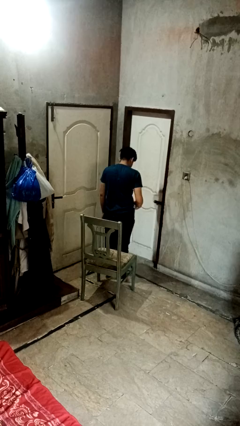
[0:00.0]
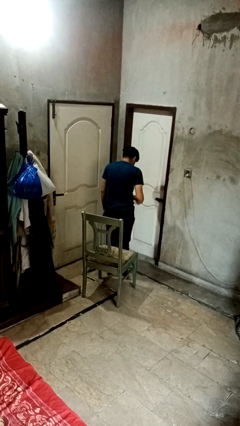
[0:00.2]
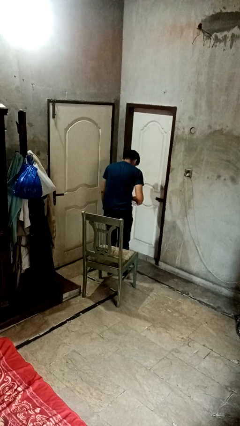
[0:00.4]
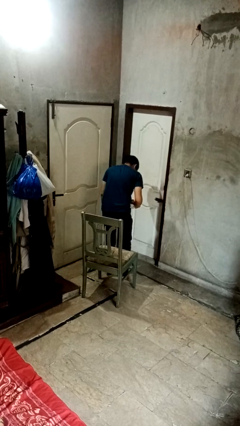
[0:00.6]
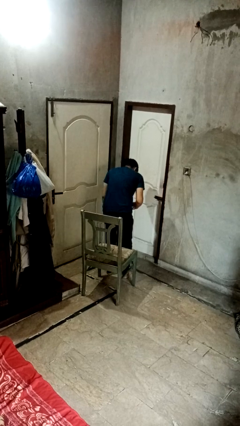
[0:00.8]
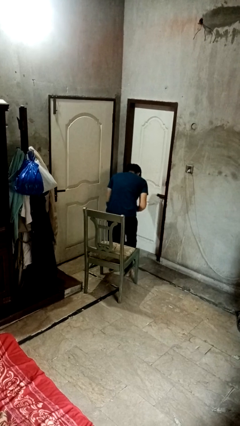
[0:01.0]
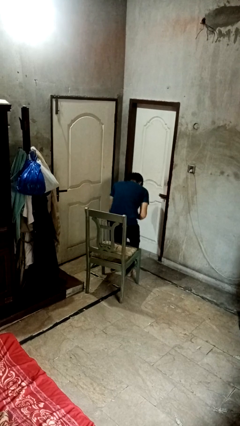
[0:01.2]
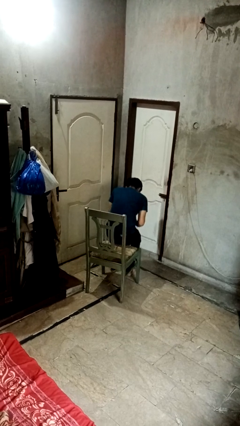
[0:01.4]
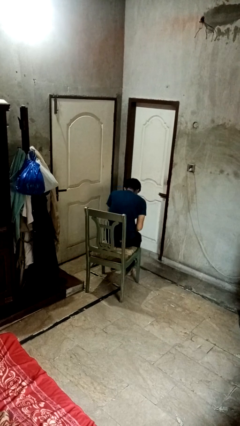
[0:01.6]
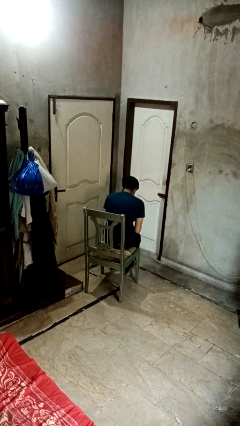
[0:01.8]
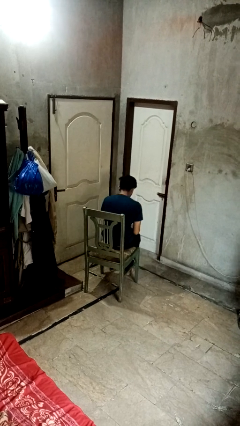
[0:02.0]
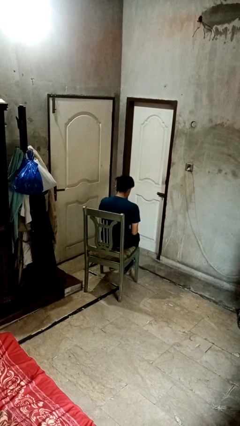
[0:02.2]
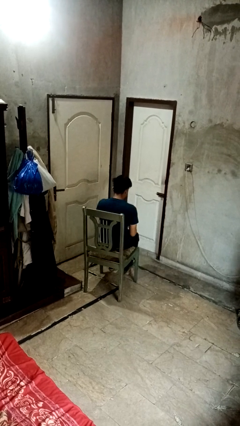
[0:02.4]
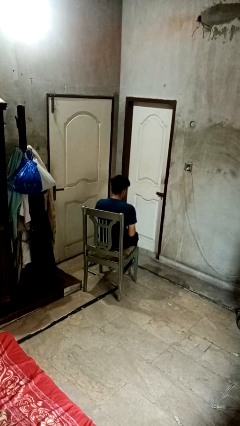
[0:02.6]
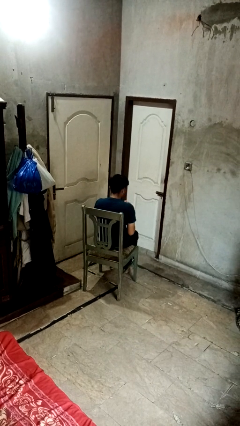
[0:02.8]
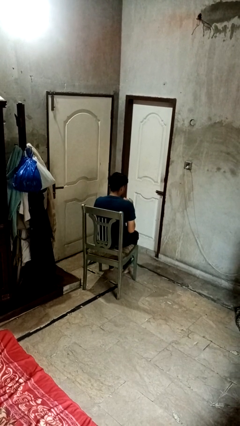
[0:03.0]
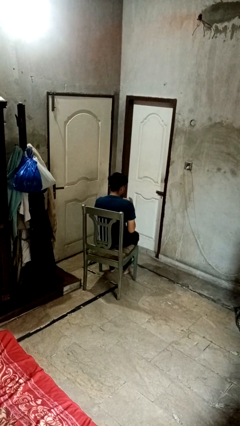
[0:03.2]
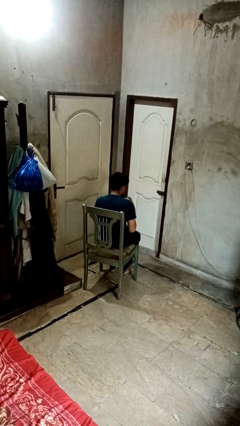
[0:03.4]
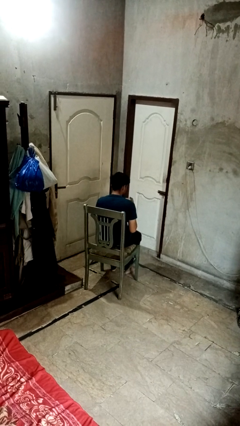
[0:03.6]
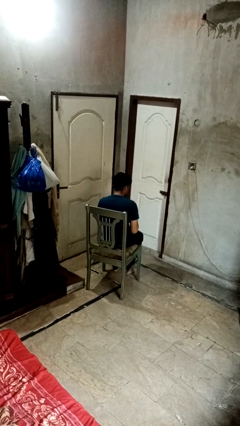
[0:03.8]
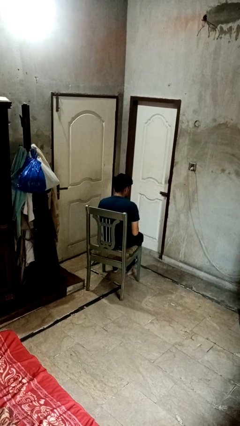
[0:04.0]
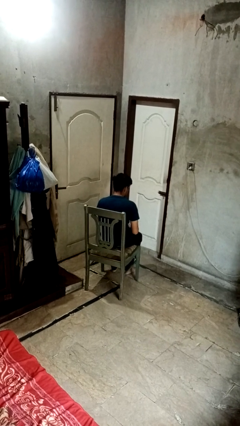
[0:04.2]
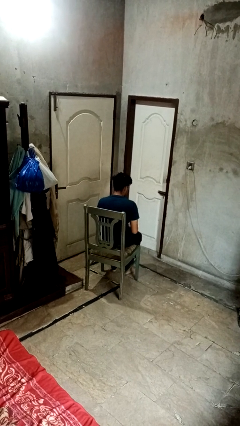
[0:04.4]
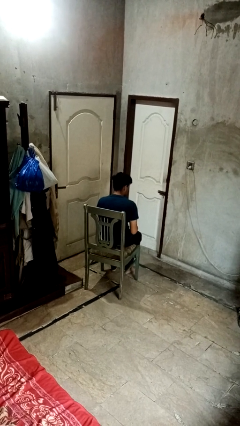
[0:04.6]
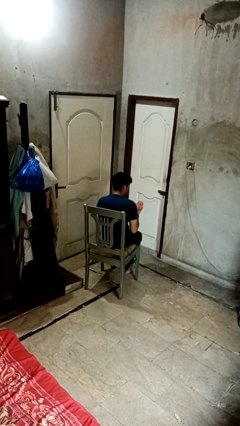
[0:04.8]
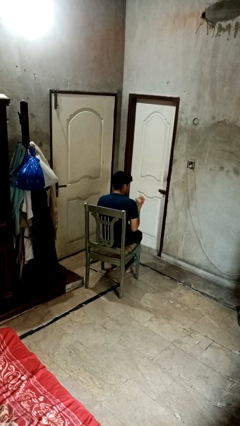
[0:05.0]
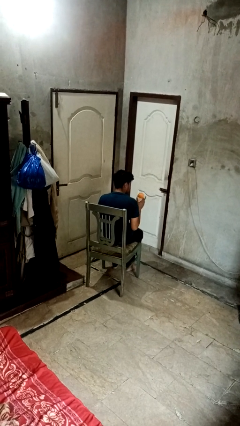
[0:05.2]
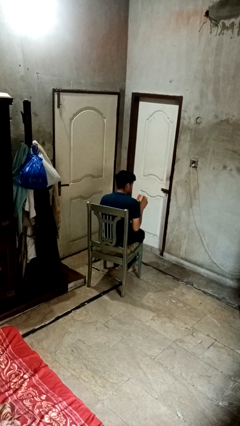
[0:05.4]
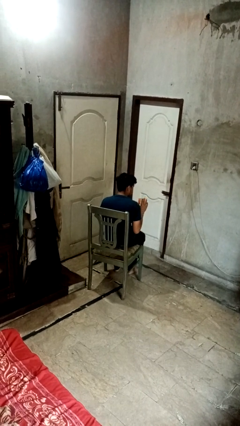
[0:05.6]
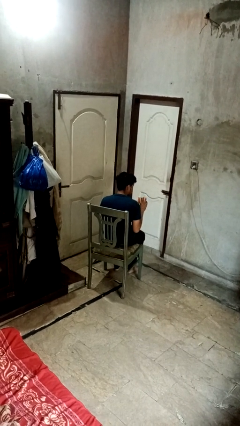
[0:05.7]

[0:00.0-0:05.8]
person sits down

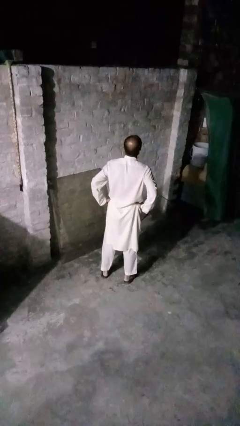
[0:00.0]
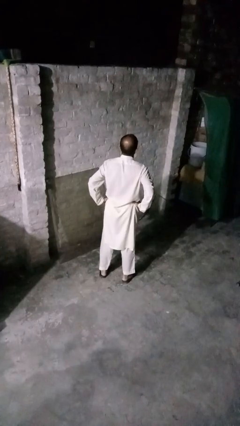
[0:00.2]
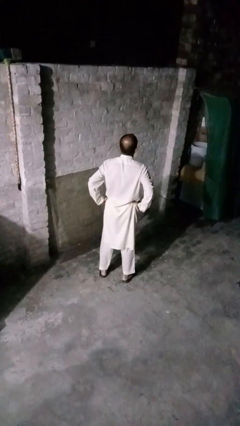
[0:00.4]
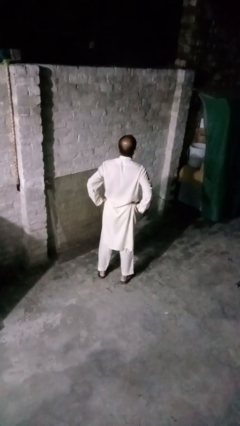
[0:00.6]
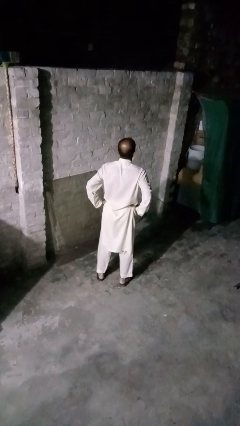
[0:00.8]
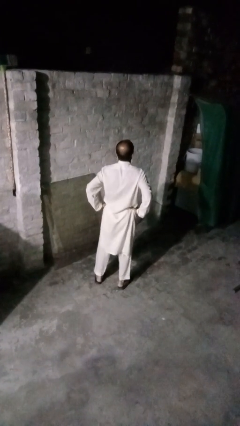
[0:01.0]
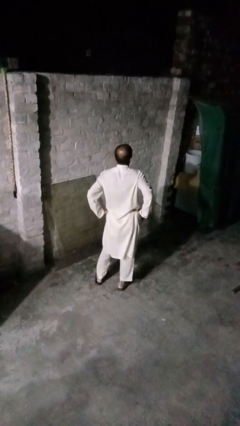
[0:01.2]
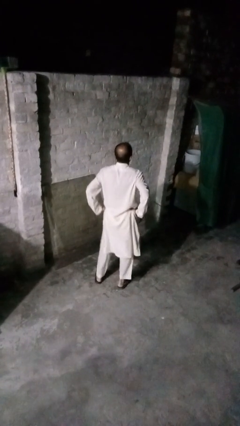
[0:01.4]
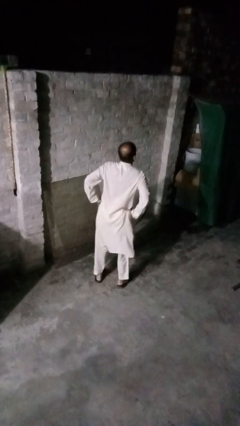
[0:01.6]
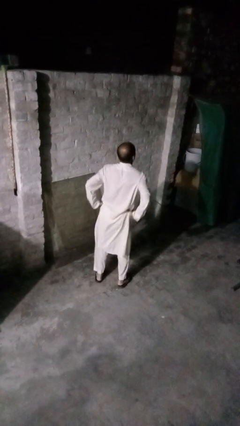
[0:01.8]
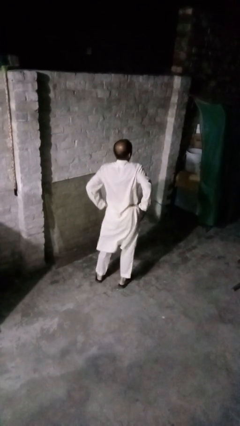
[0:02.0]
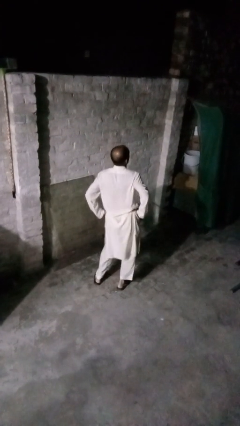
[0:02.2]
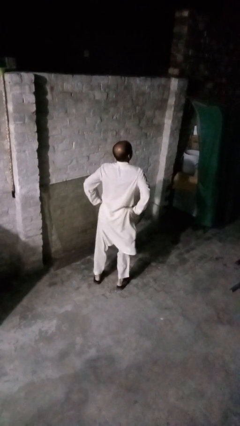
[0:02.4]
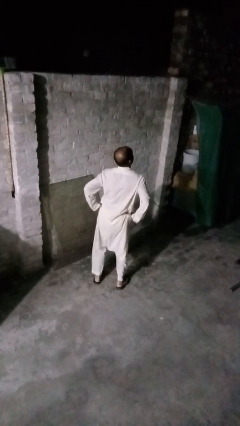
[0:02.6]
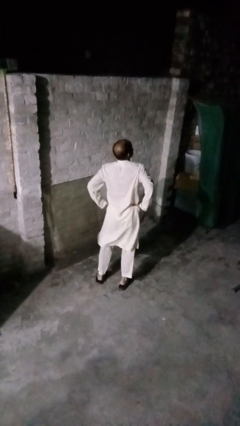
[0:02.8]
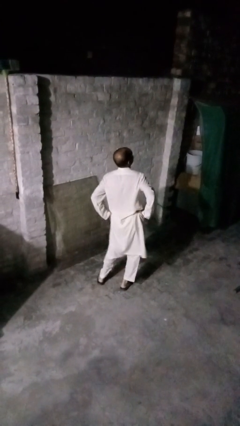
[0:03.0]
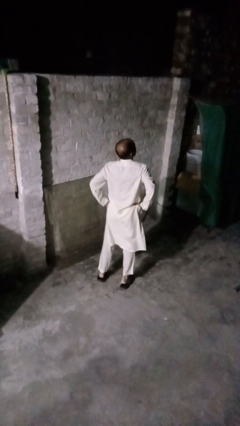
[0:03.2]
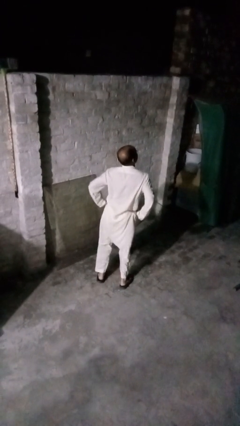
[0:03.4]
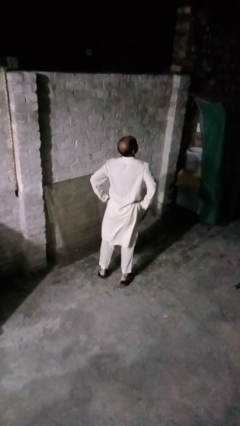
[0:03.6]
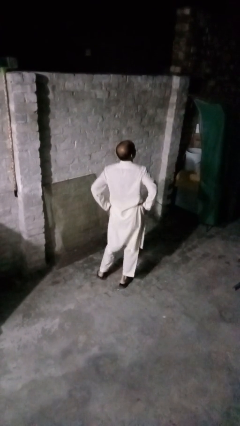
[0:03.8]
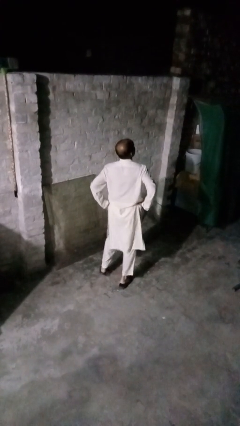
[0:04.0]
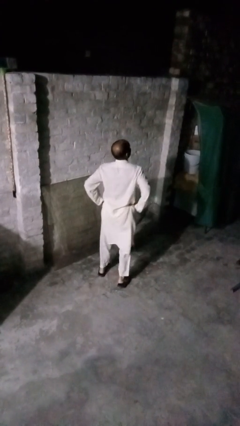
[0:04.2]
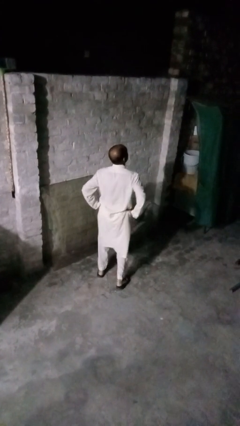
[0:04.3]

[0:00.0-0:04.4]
person wiggles hips

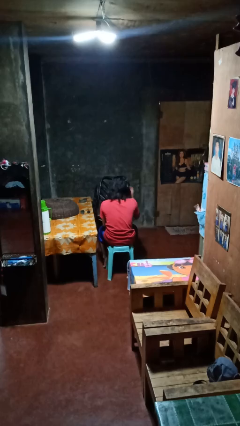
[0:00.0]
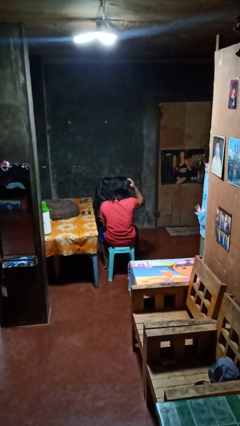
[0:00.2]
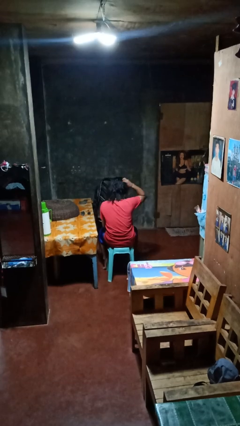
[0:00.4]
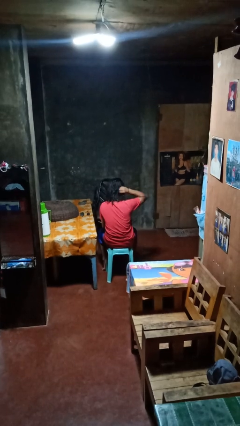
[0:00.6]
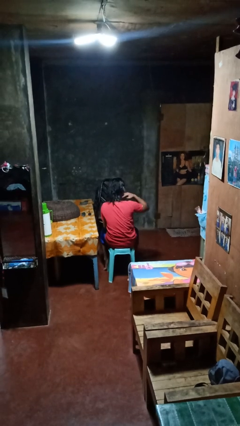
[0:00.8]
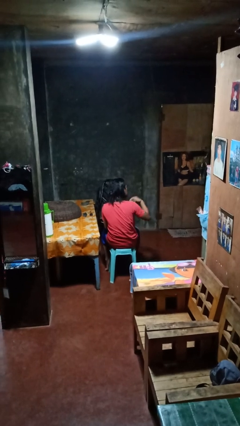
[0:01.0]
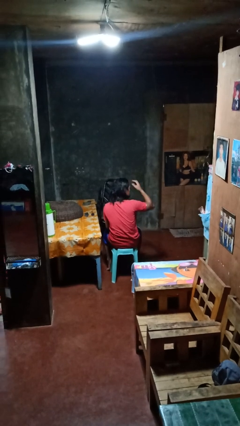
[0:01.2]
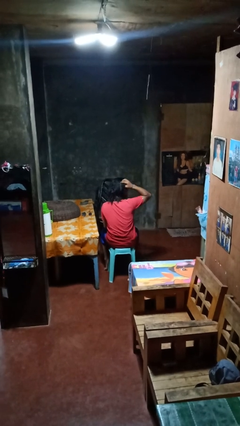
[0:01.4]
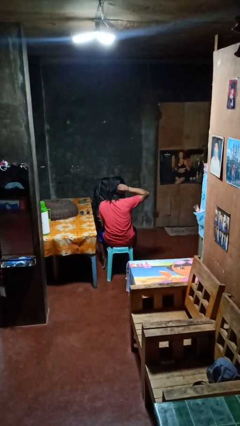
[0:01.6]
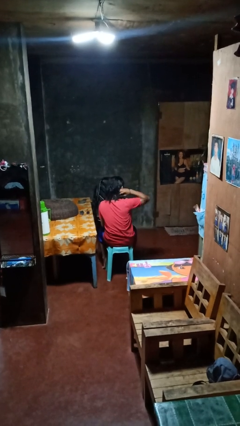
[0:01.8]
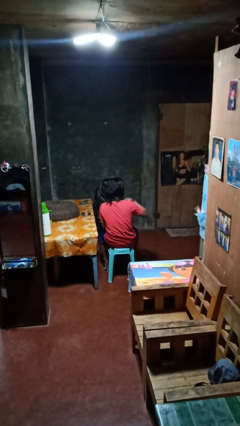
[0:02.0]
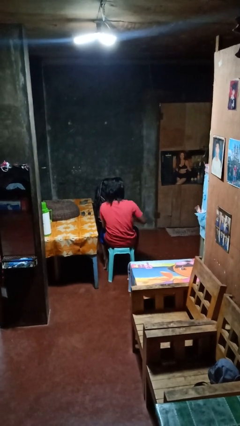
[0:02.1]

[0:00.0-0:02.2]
person strokes hair

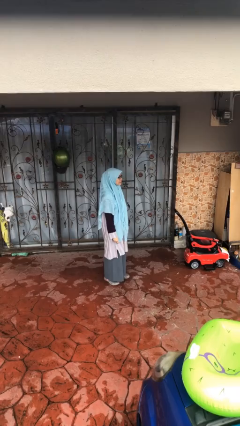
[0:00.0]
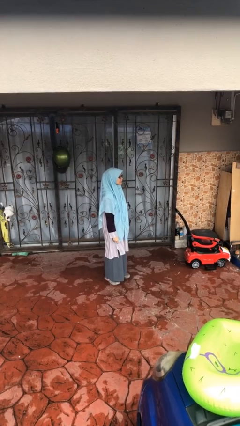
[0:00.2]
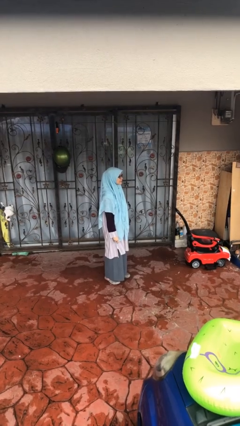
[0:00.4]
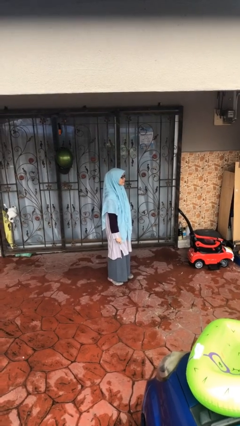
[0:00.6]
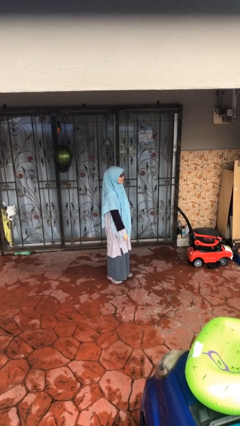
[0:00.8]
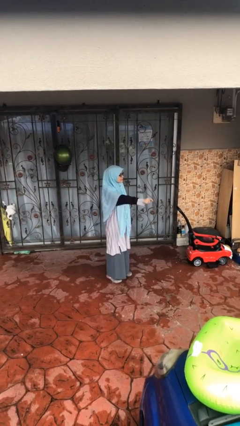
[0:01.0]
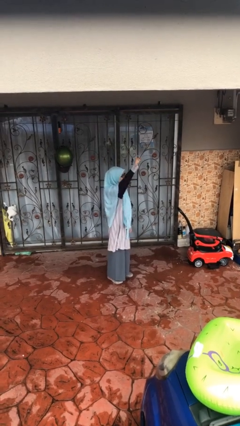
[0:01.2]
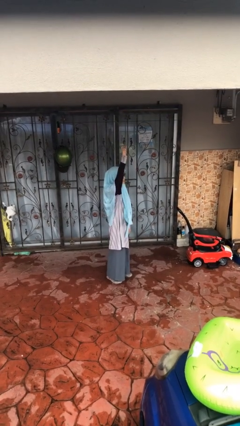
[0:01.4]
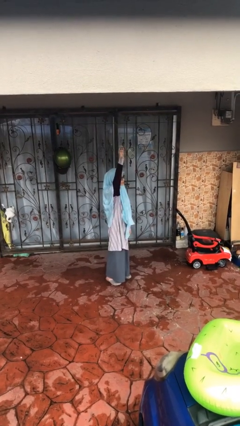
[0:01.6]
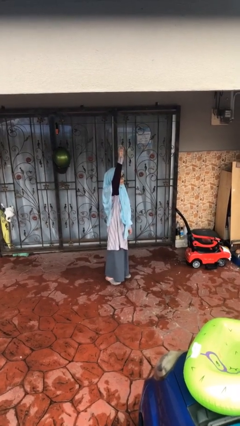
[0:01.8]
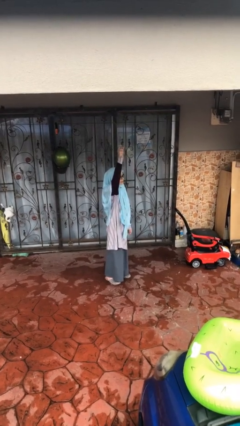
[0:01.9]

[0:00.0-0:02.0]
person gestures raise hand

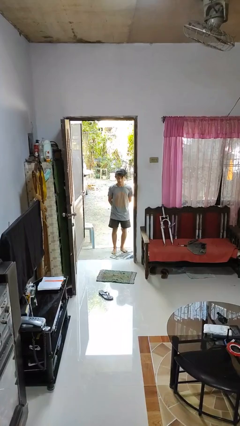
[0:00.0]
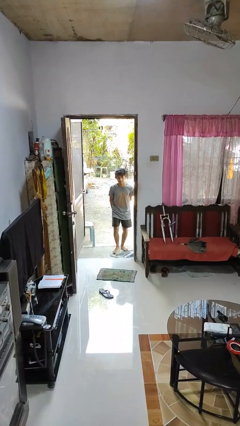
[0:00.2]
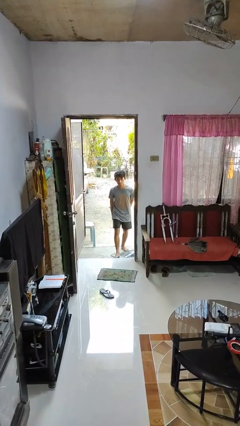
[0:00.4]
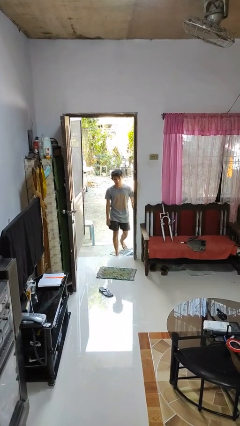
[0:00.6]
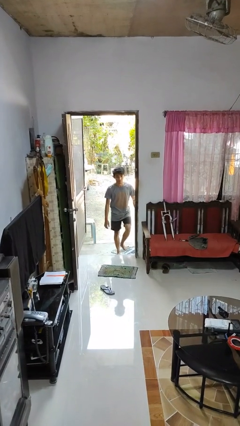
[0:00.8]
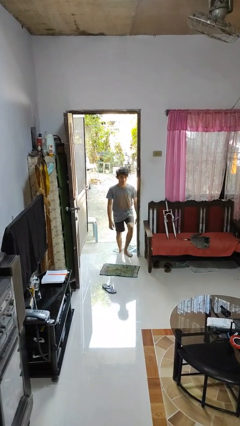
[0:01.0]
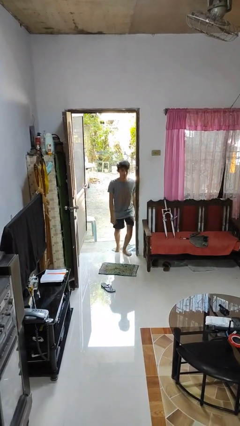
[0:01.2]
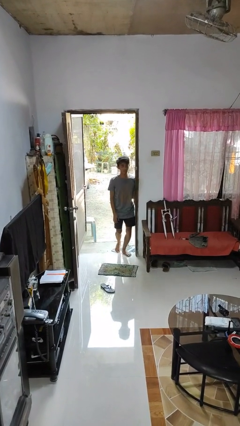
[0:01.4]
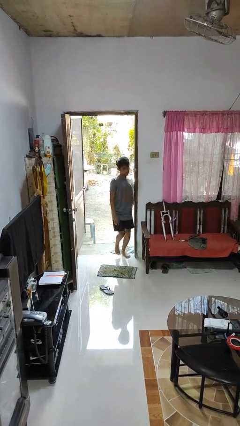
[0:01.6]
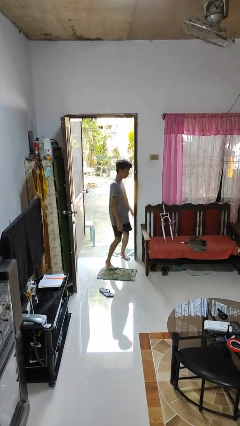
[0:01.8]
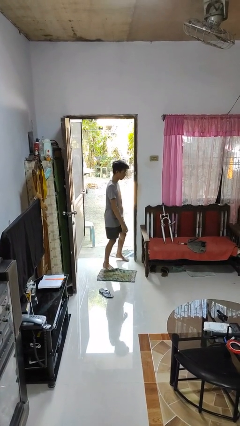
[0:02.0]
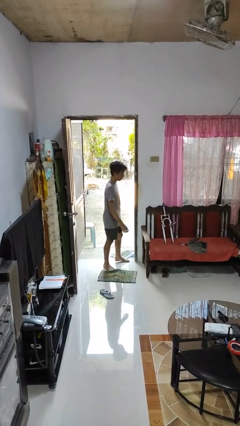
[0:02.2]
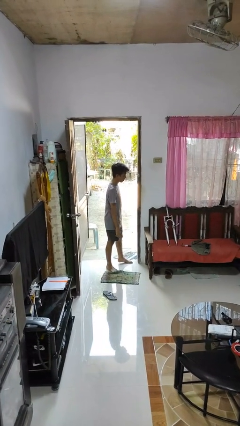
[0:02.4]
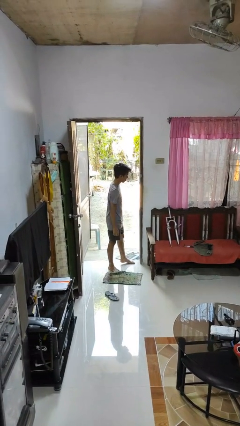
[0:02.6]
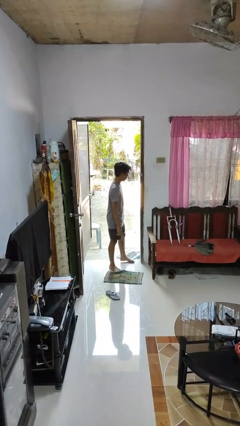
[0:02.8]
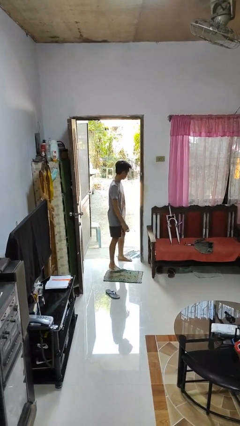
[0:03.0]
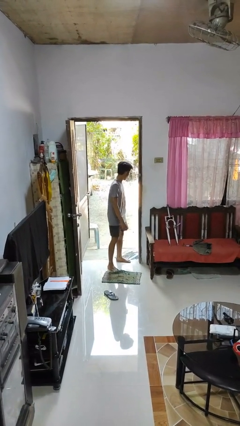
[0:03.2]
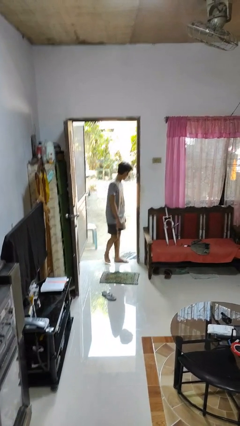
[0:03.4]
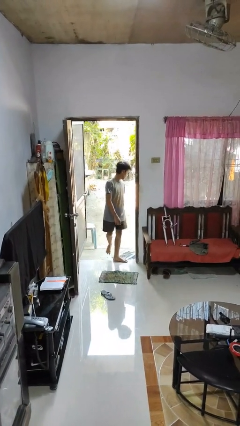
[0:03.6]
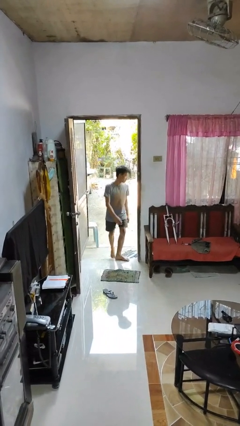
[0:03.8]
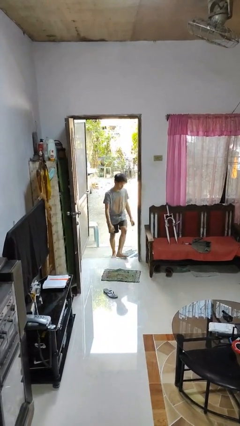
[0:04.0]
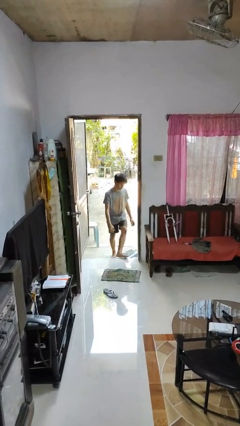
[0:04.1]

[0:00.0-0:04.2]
person bumps into wall
